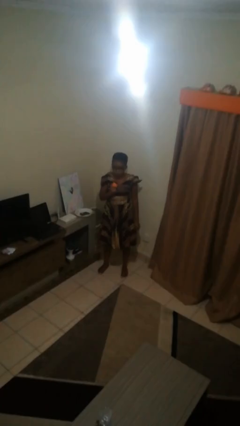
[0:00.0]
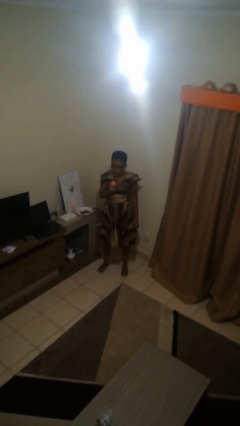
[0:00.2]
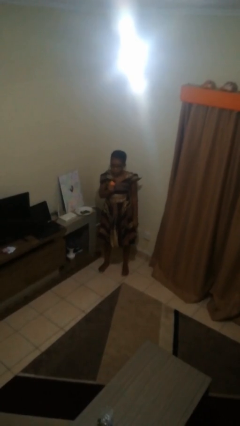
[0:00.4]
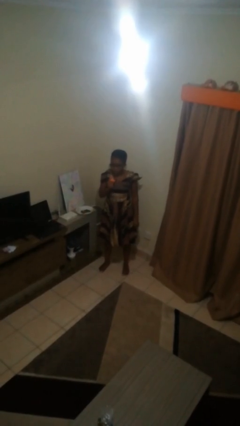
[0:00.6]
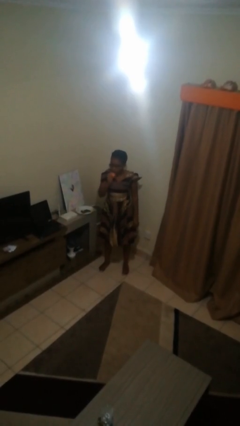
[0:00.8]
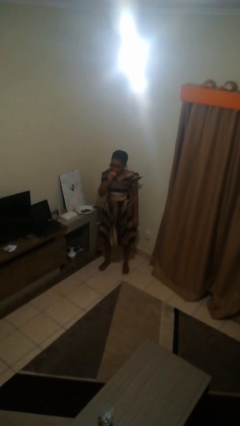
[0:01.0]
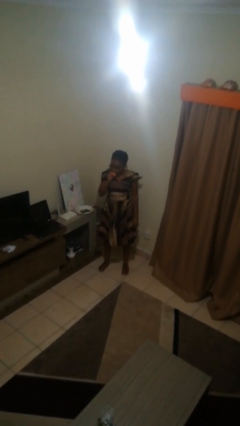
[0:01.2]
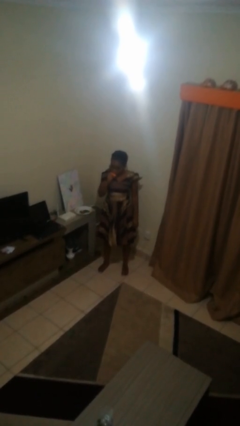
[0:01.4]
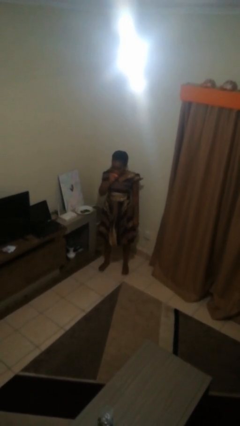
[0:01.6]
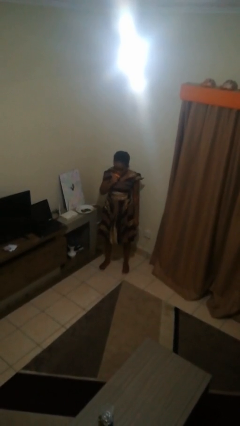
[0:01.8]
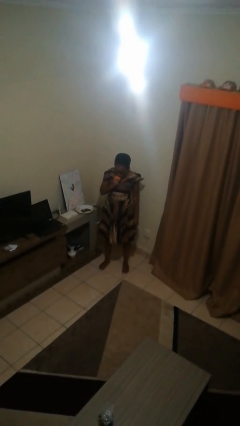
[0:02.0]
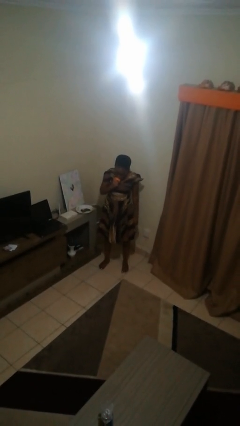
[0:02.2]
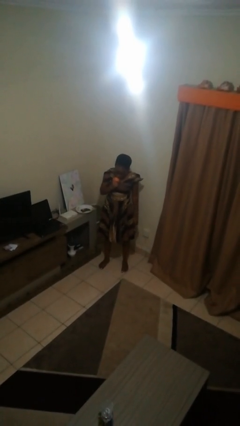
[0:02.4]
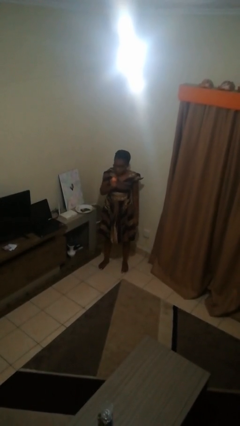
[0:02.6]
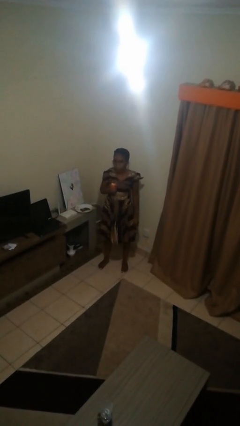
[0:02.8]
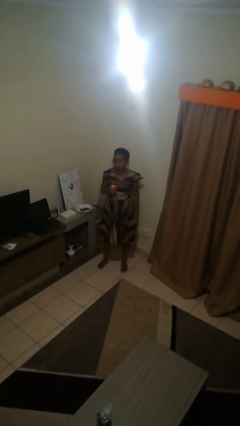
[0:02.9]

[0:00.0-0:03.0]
person eats apple

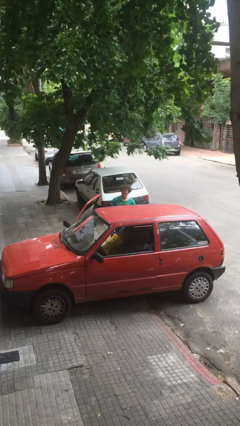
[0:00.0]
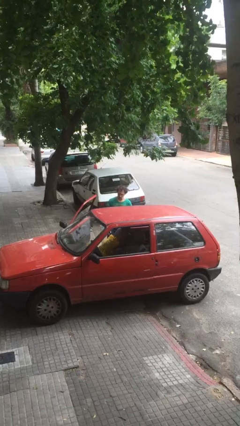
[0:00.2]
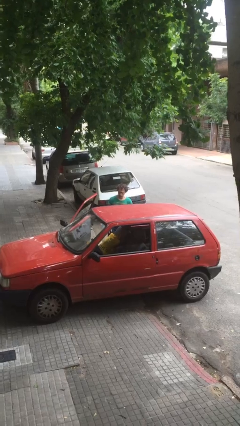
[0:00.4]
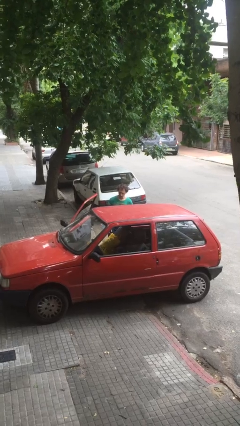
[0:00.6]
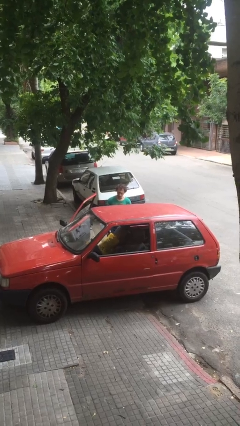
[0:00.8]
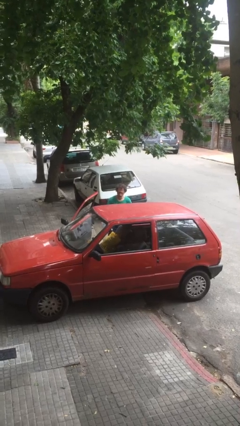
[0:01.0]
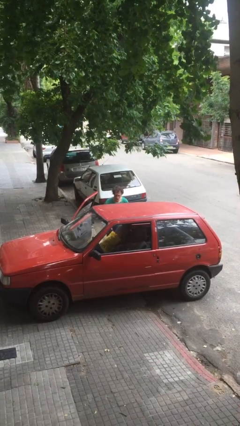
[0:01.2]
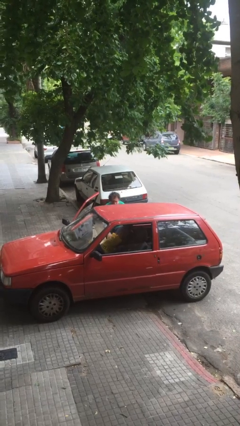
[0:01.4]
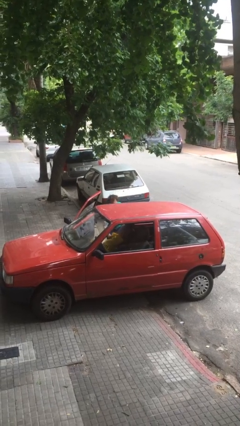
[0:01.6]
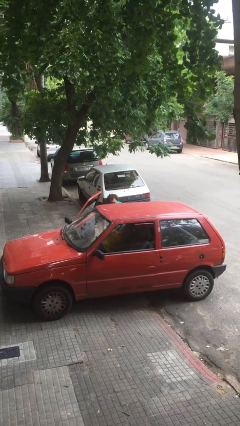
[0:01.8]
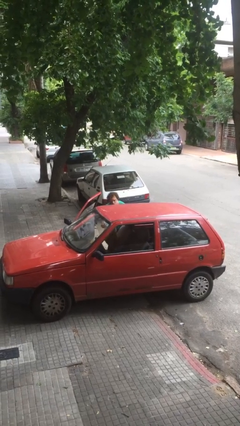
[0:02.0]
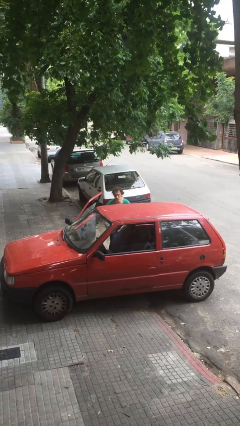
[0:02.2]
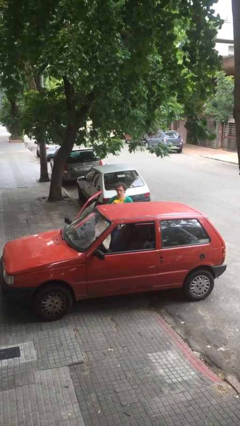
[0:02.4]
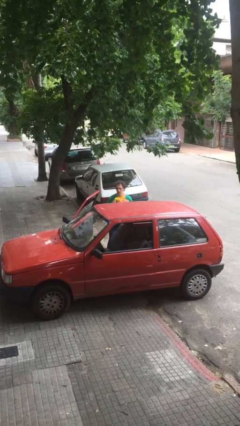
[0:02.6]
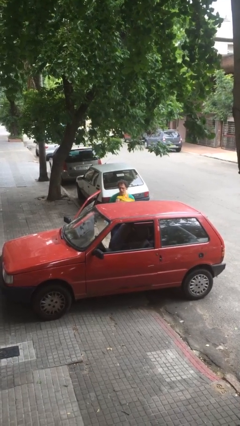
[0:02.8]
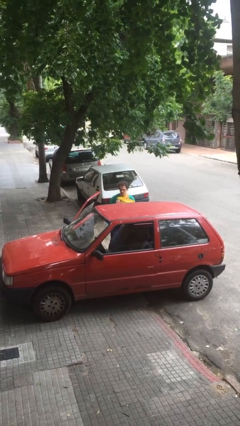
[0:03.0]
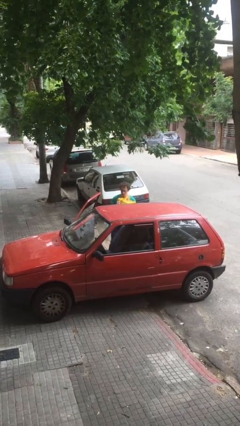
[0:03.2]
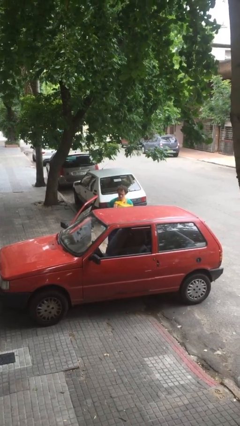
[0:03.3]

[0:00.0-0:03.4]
person unloads car

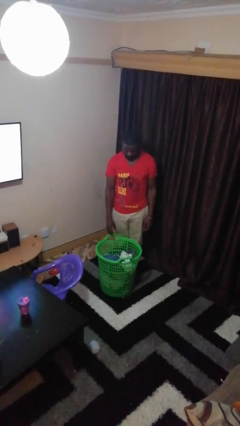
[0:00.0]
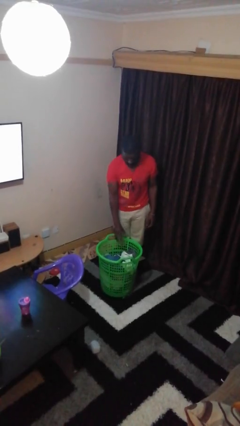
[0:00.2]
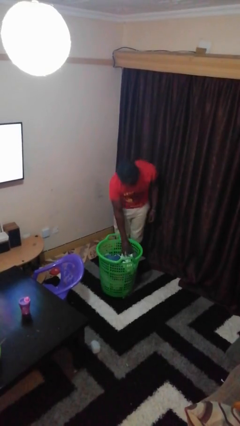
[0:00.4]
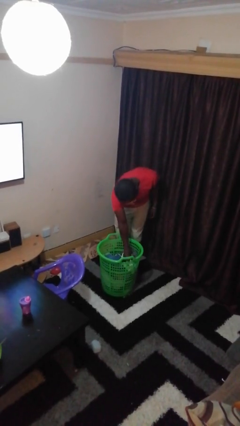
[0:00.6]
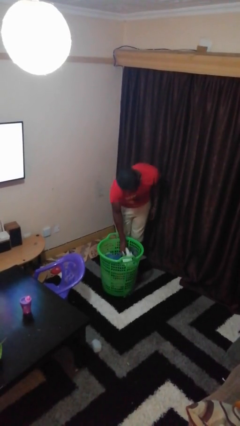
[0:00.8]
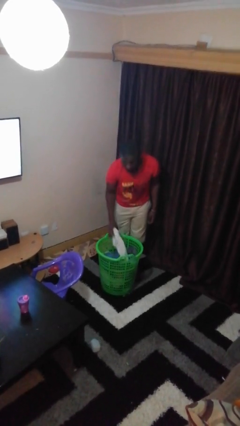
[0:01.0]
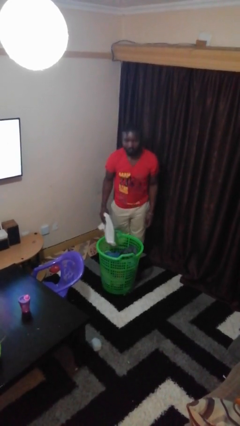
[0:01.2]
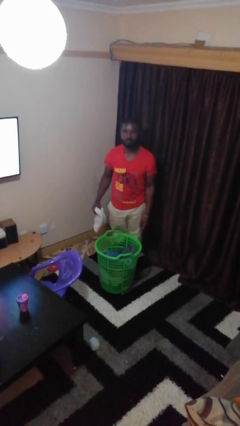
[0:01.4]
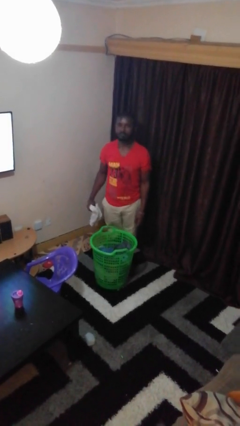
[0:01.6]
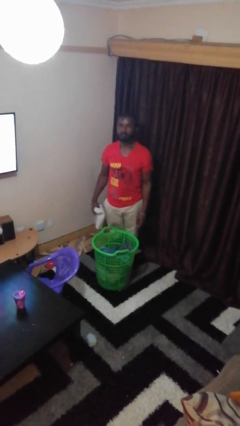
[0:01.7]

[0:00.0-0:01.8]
person takes object from basket

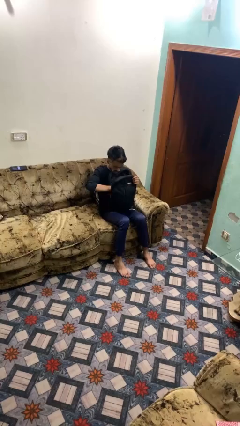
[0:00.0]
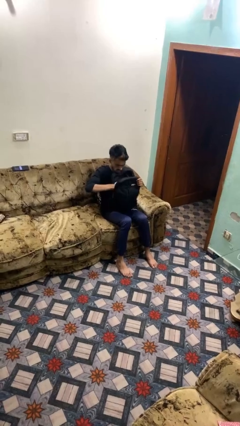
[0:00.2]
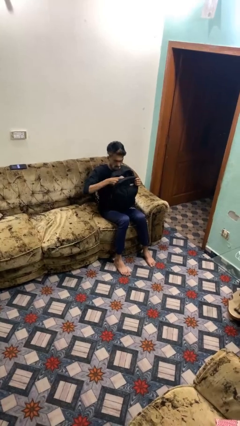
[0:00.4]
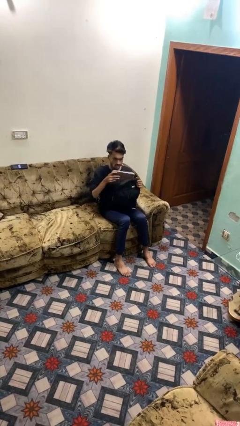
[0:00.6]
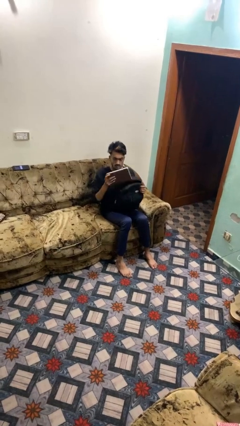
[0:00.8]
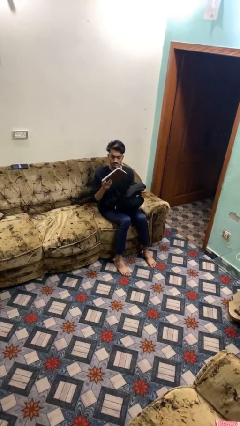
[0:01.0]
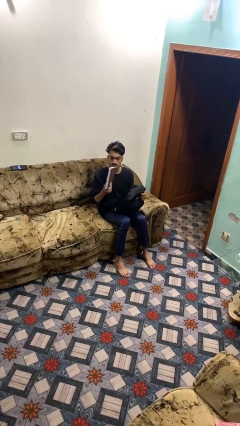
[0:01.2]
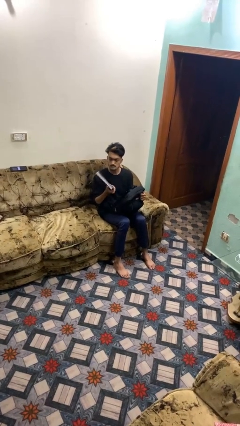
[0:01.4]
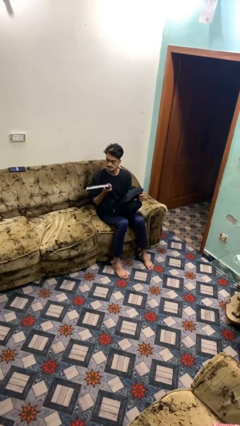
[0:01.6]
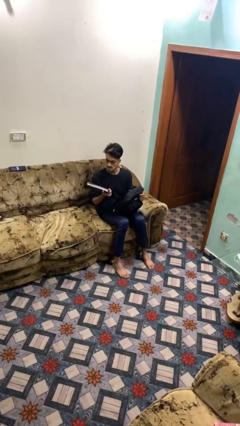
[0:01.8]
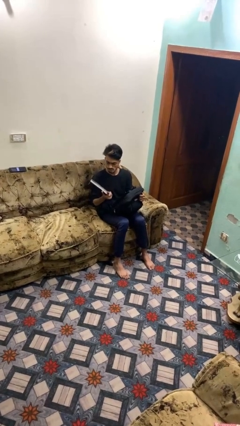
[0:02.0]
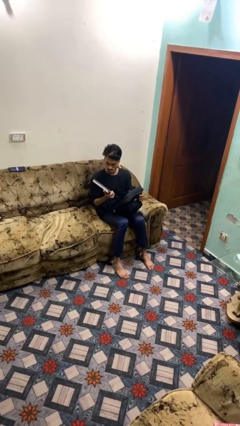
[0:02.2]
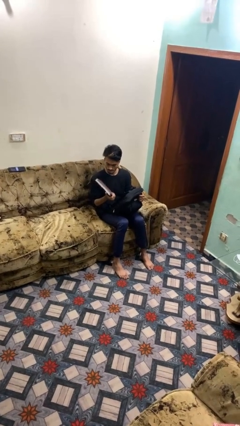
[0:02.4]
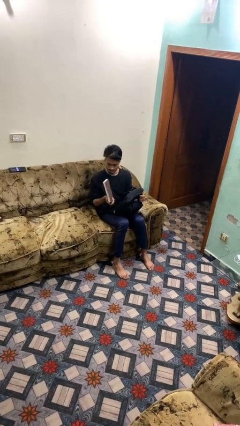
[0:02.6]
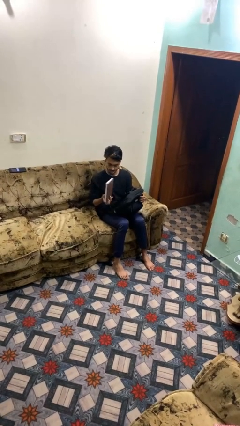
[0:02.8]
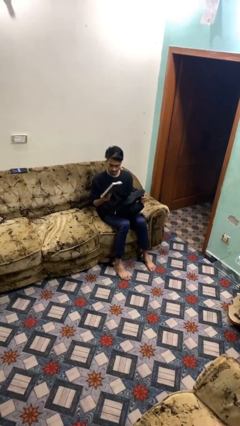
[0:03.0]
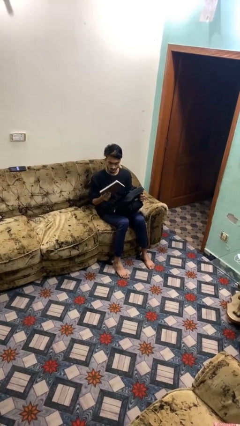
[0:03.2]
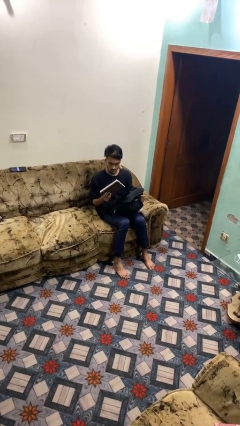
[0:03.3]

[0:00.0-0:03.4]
person takes object from backpack

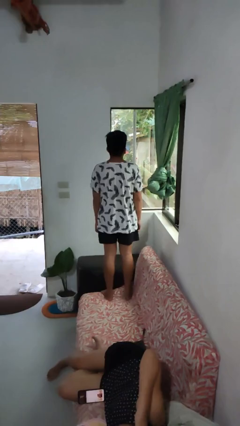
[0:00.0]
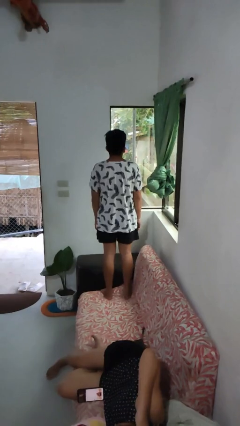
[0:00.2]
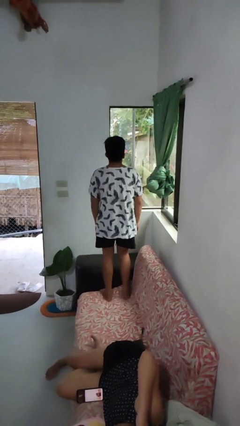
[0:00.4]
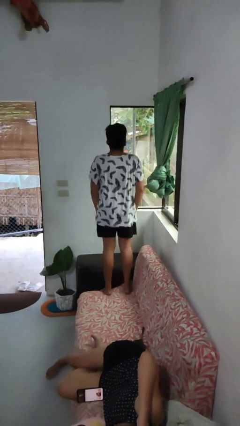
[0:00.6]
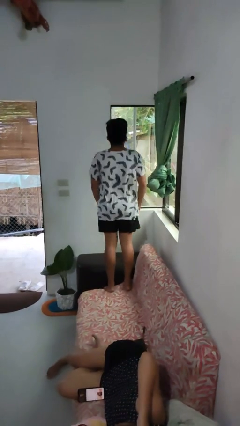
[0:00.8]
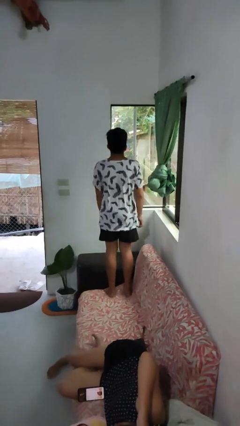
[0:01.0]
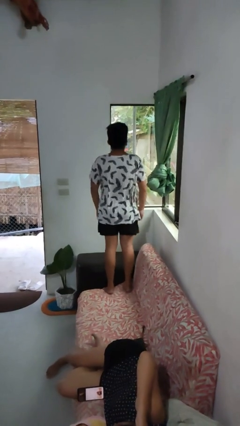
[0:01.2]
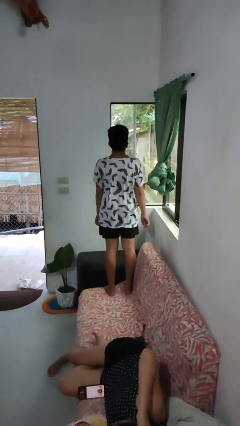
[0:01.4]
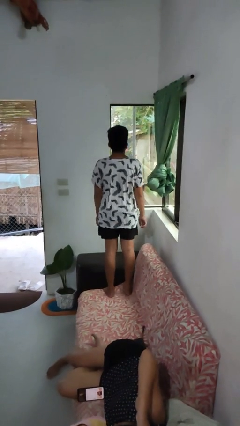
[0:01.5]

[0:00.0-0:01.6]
person jumps on couch

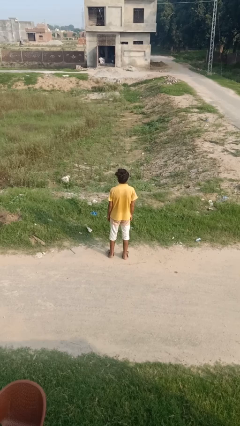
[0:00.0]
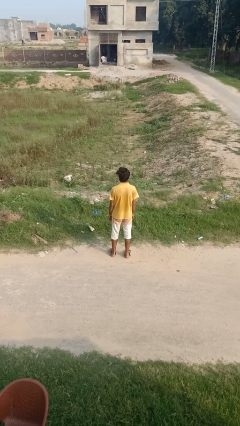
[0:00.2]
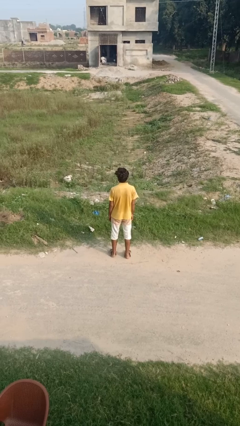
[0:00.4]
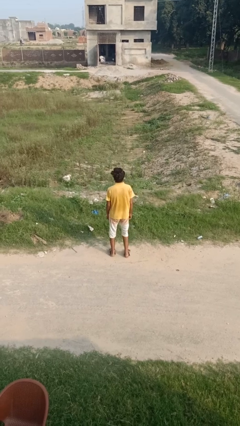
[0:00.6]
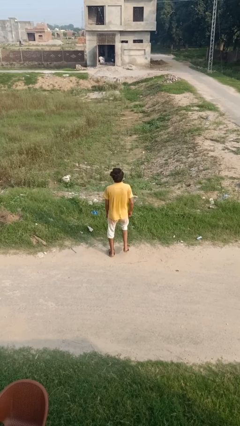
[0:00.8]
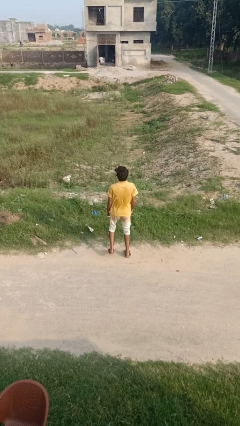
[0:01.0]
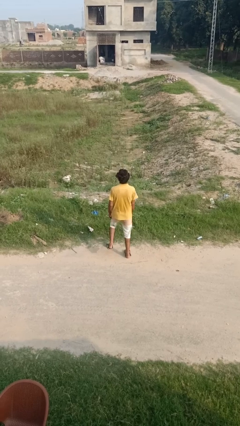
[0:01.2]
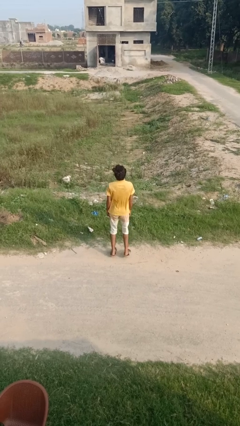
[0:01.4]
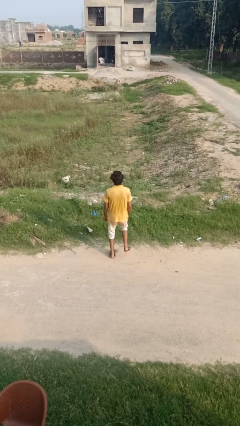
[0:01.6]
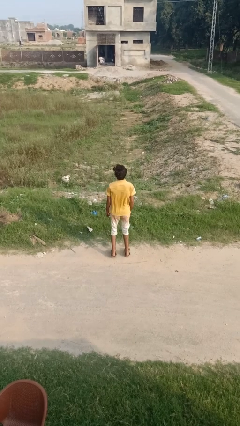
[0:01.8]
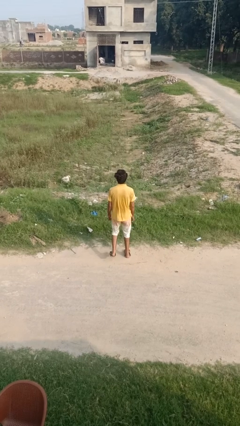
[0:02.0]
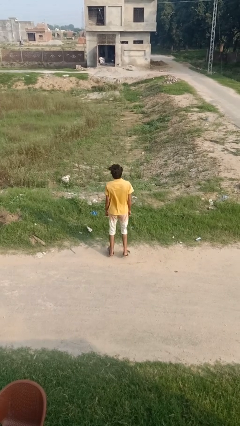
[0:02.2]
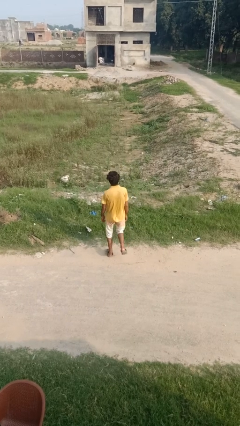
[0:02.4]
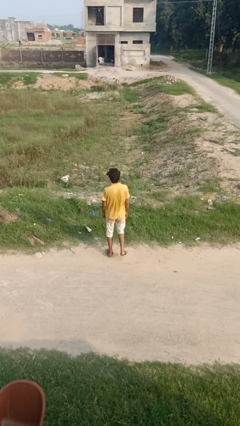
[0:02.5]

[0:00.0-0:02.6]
person dances in place

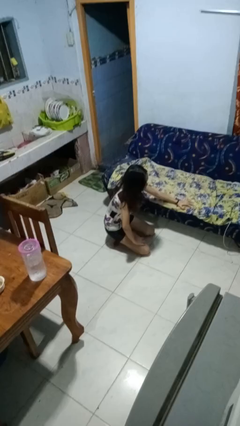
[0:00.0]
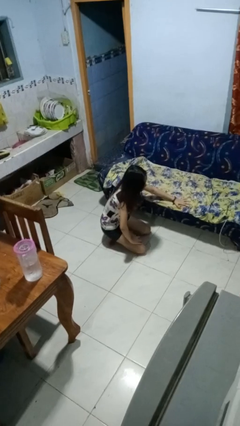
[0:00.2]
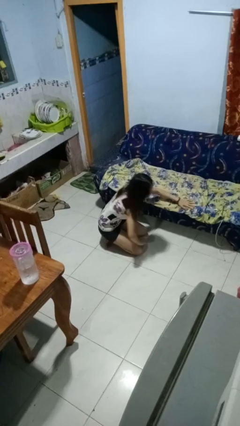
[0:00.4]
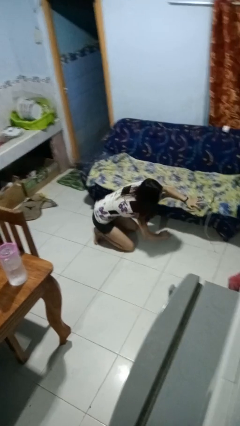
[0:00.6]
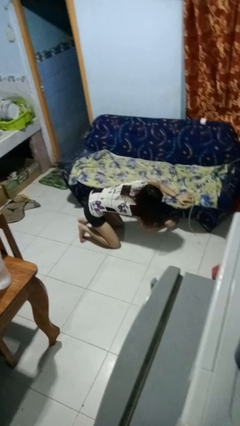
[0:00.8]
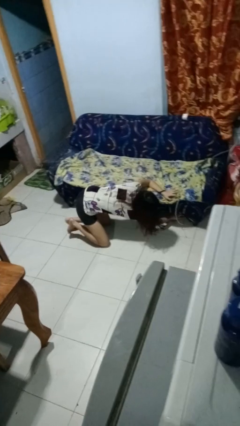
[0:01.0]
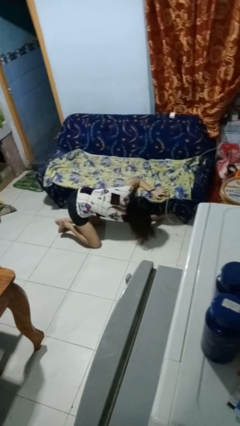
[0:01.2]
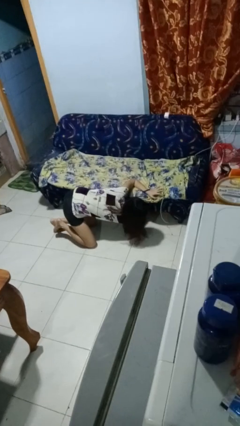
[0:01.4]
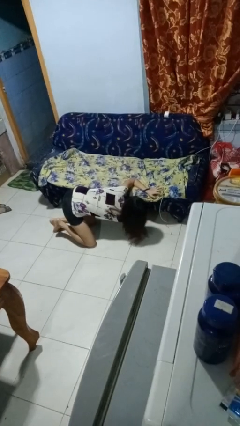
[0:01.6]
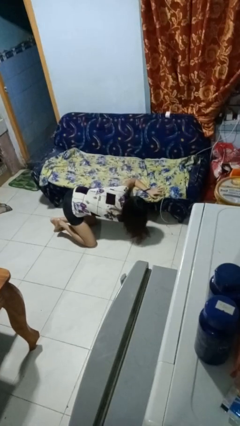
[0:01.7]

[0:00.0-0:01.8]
person searches under couch
